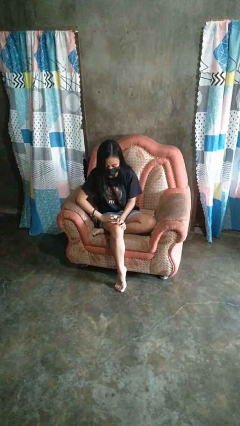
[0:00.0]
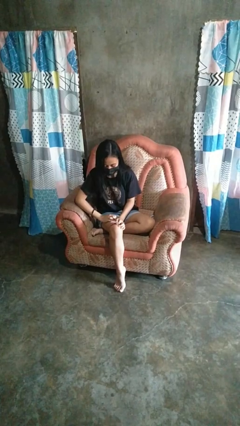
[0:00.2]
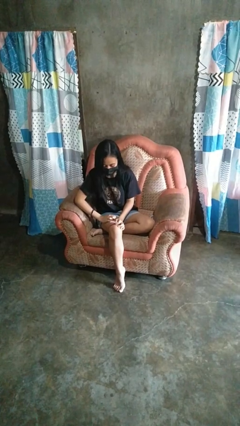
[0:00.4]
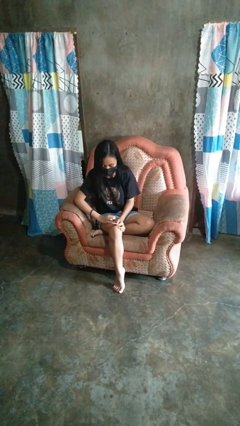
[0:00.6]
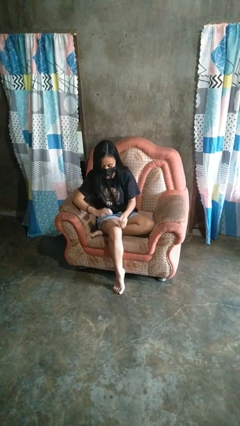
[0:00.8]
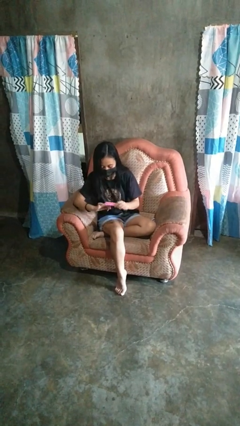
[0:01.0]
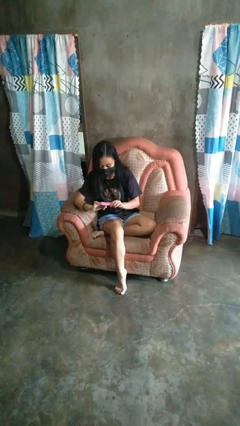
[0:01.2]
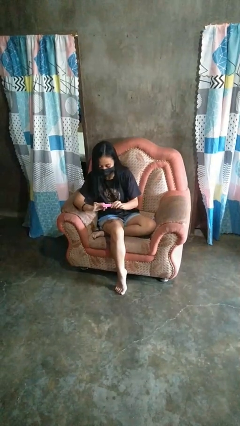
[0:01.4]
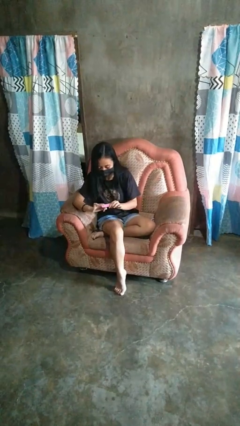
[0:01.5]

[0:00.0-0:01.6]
person files fingernails

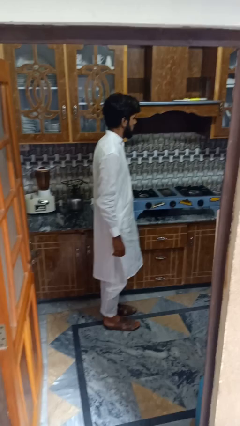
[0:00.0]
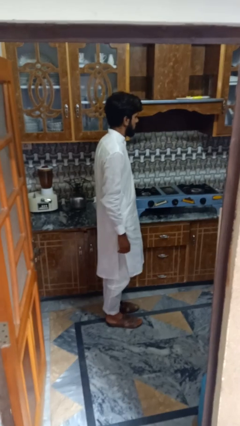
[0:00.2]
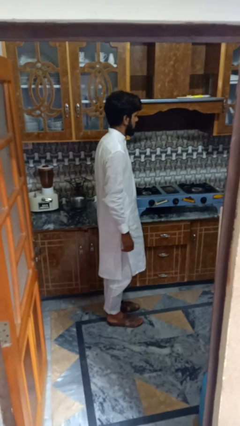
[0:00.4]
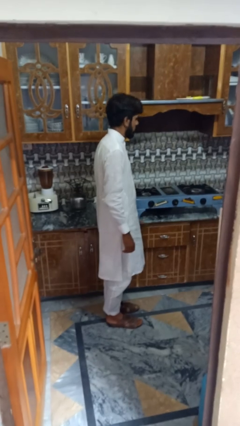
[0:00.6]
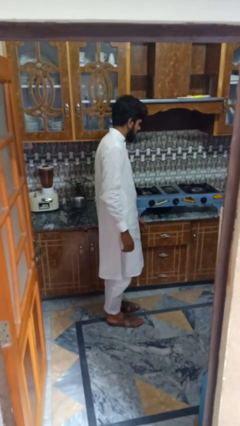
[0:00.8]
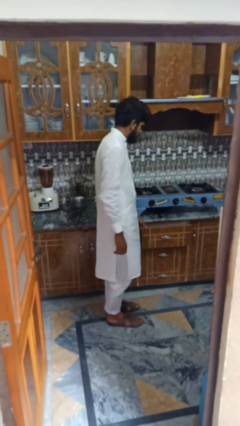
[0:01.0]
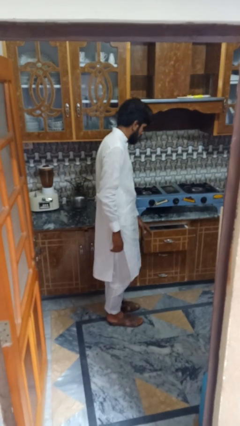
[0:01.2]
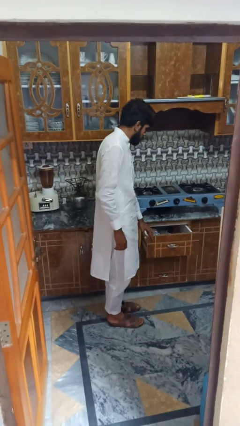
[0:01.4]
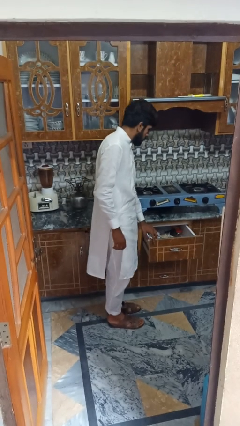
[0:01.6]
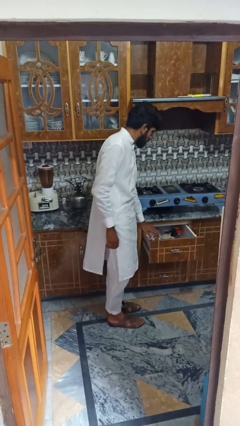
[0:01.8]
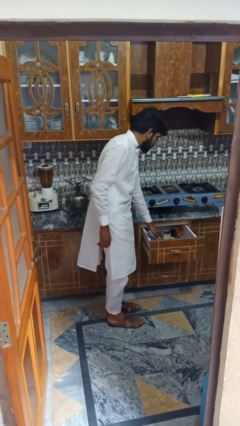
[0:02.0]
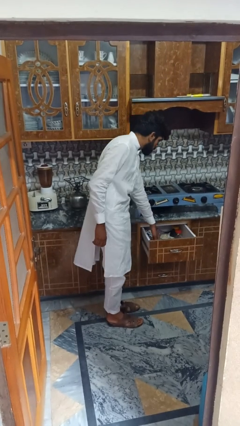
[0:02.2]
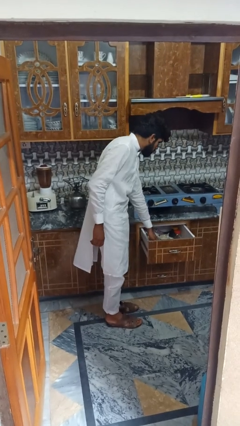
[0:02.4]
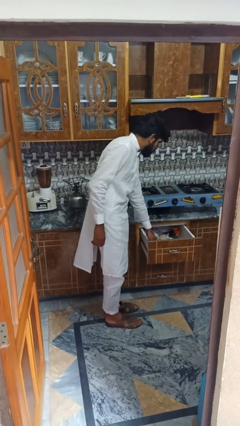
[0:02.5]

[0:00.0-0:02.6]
person searches in kitchen drawer

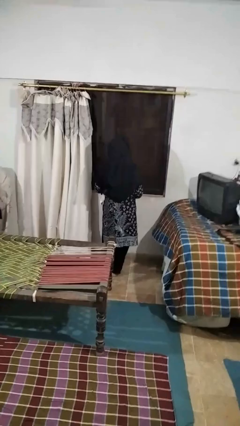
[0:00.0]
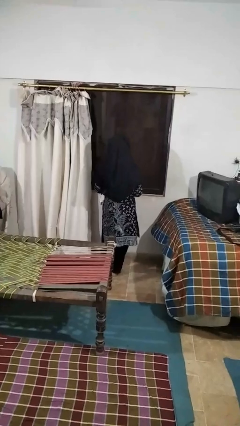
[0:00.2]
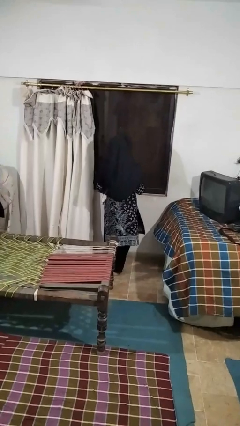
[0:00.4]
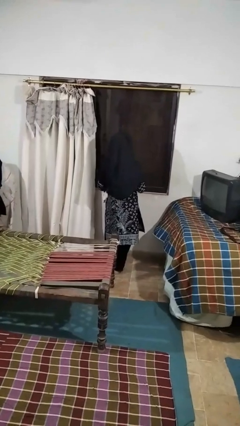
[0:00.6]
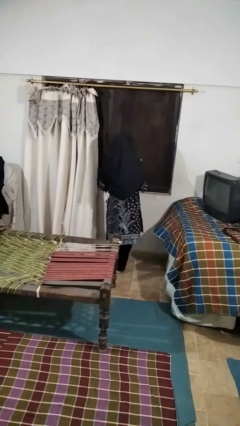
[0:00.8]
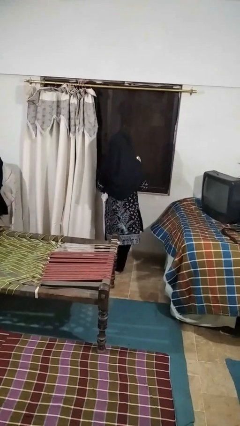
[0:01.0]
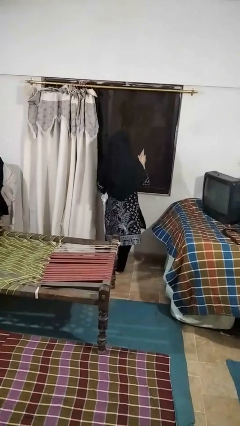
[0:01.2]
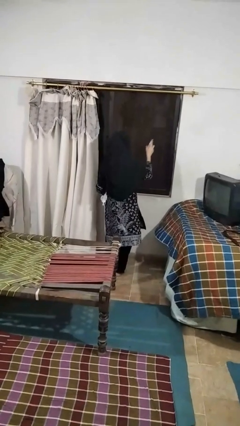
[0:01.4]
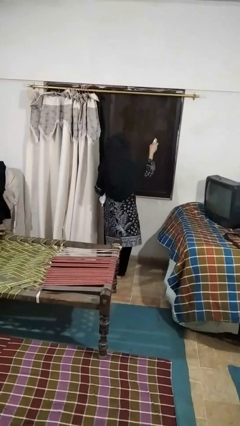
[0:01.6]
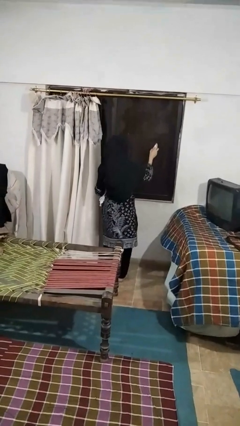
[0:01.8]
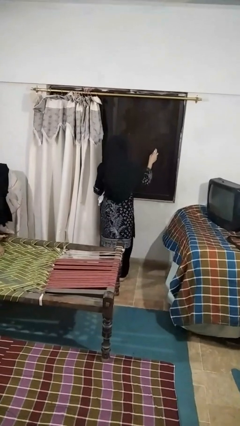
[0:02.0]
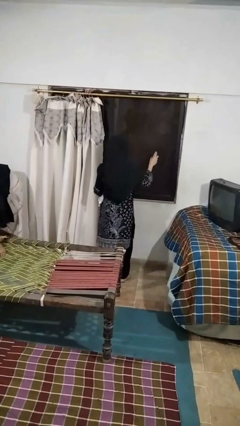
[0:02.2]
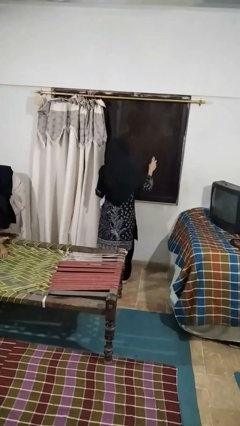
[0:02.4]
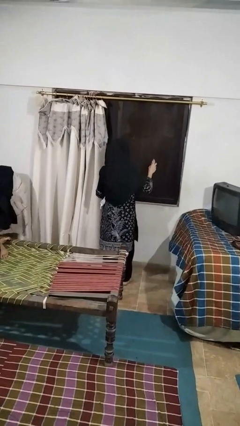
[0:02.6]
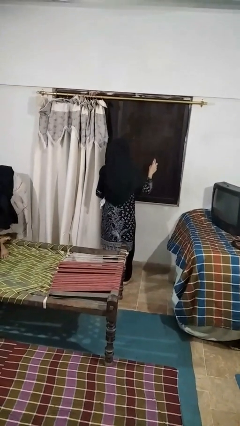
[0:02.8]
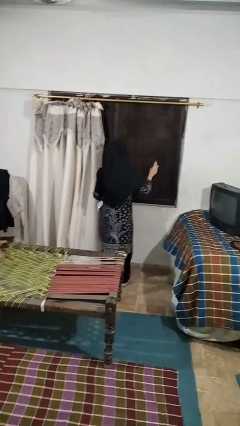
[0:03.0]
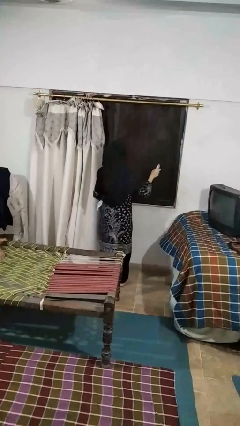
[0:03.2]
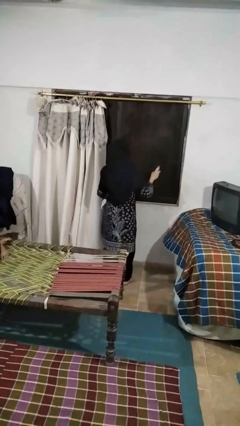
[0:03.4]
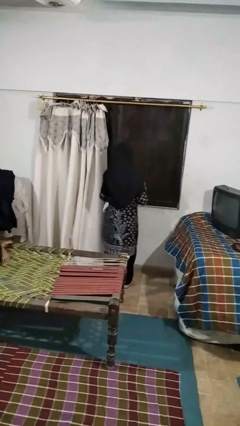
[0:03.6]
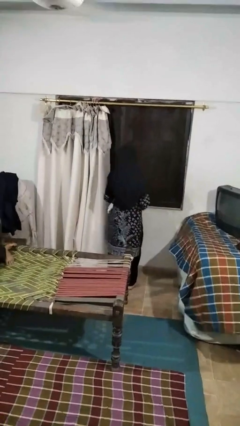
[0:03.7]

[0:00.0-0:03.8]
person sprays from bottle

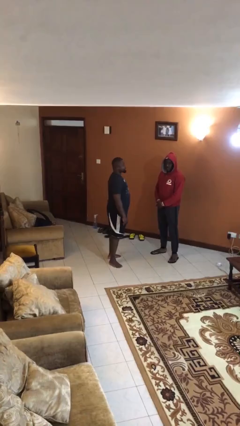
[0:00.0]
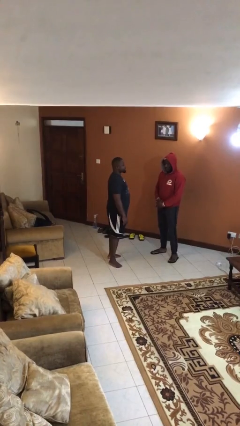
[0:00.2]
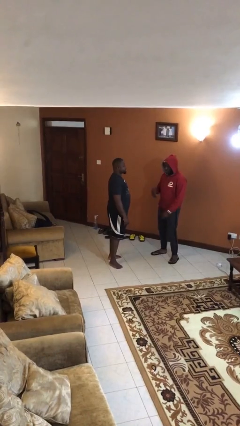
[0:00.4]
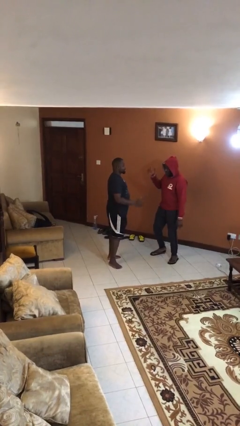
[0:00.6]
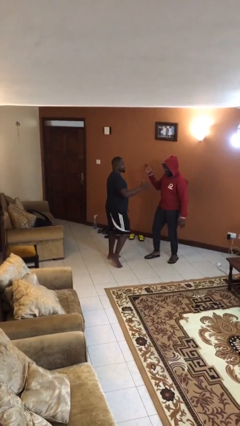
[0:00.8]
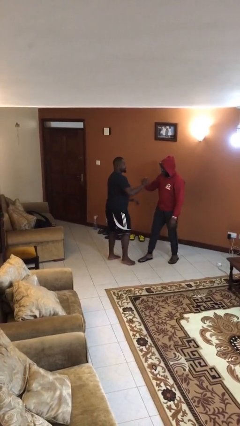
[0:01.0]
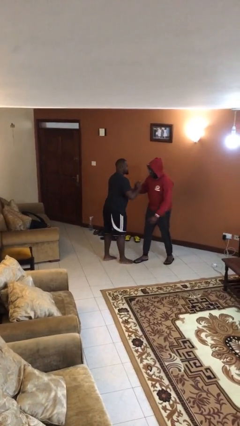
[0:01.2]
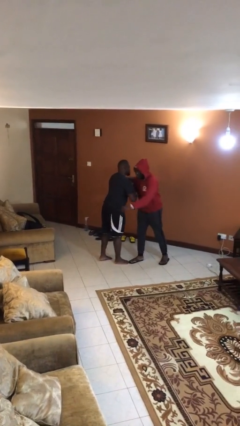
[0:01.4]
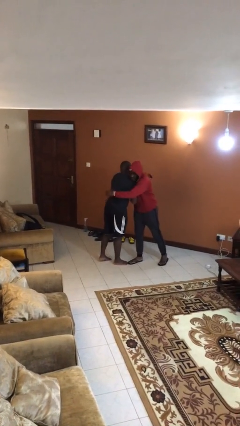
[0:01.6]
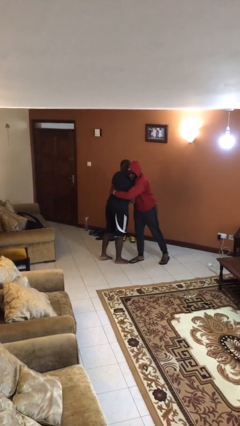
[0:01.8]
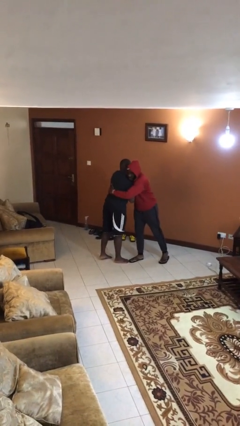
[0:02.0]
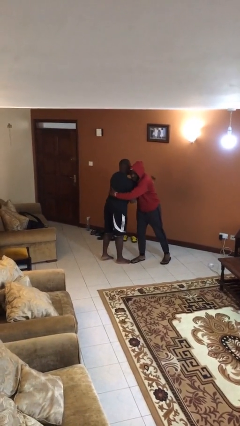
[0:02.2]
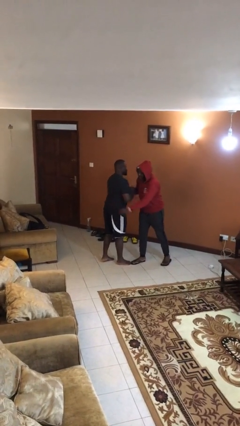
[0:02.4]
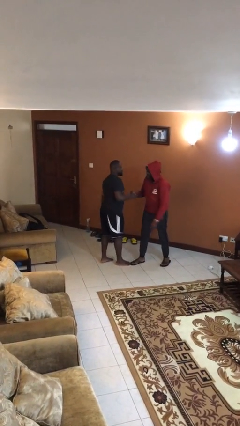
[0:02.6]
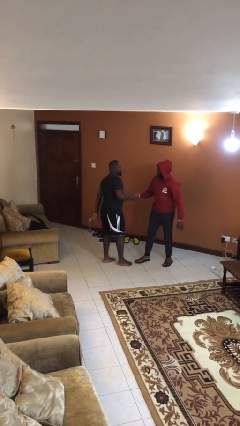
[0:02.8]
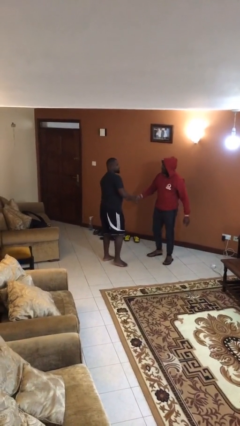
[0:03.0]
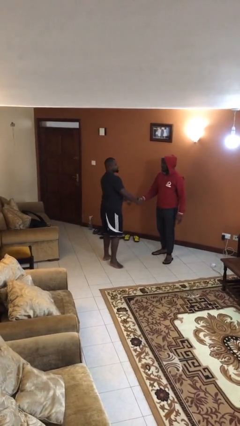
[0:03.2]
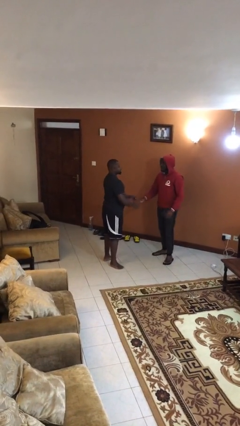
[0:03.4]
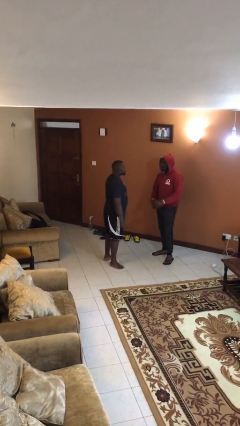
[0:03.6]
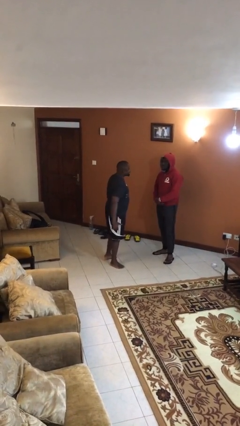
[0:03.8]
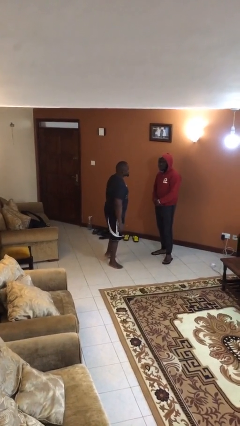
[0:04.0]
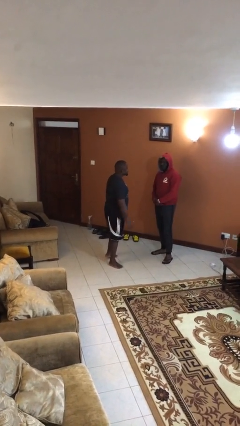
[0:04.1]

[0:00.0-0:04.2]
person embraces person

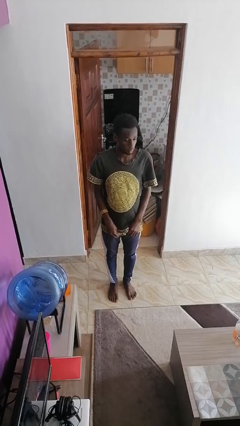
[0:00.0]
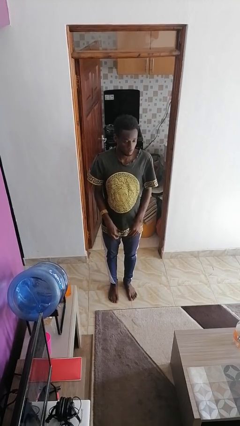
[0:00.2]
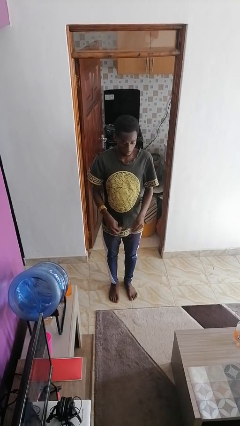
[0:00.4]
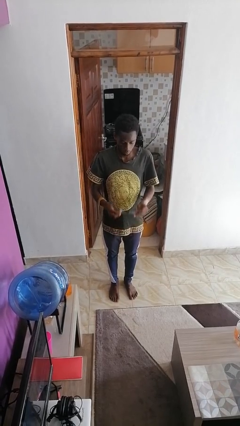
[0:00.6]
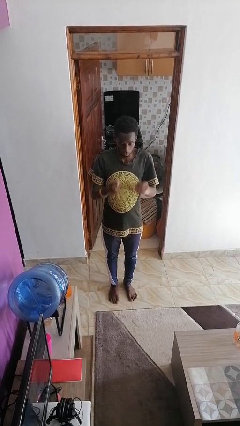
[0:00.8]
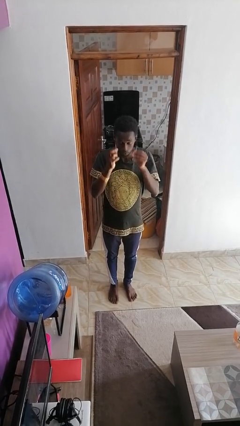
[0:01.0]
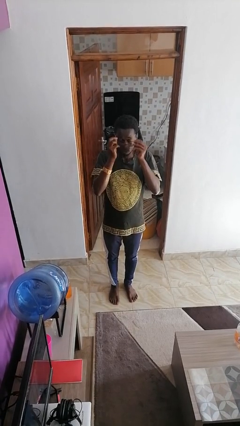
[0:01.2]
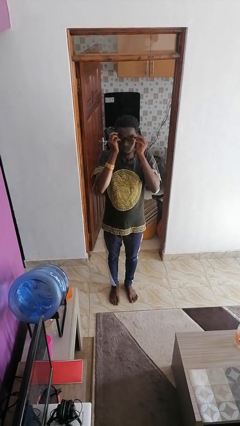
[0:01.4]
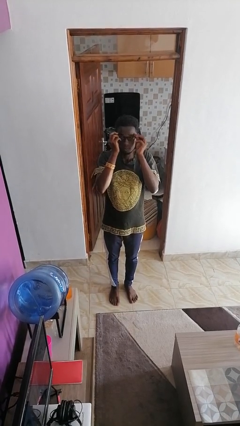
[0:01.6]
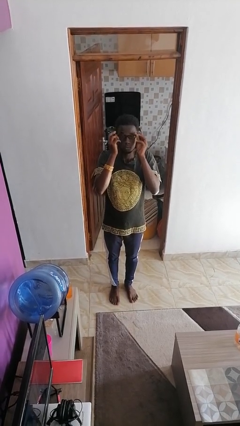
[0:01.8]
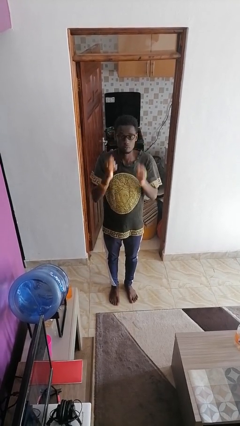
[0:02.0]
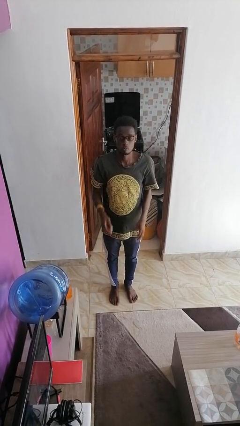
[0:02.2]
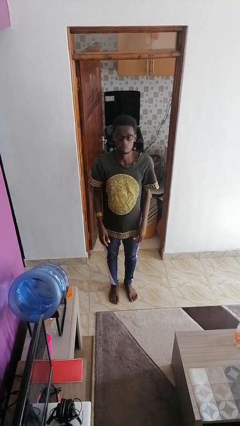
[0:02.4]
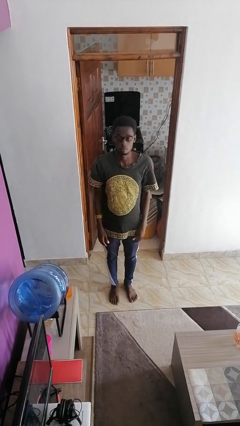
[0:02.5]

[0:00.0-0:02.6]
person puts on glasses

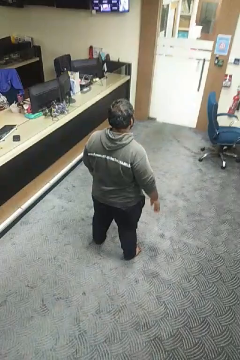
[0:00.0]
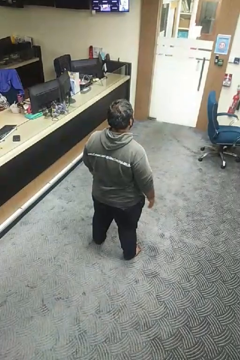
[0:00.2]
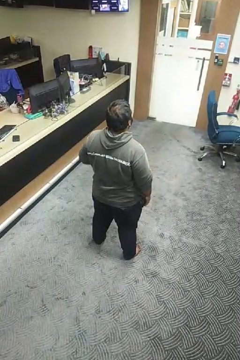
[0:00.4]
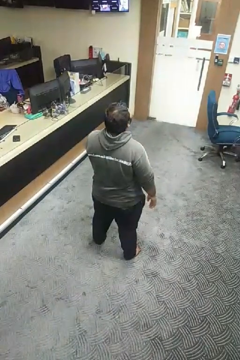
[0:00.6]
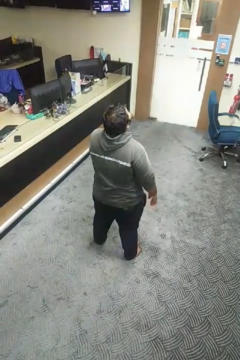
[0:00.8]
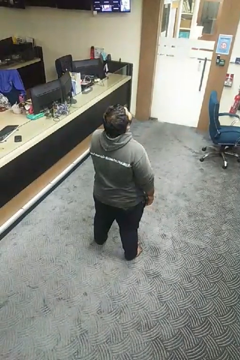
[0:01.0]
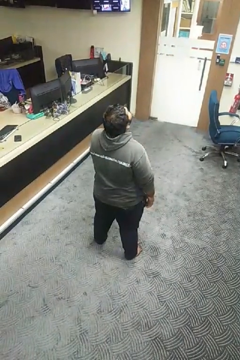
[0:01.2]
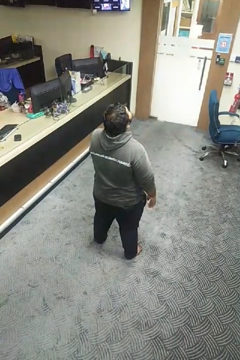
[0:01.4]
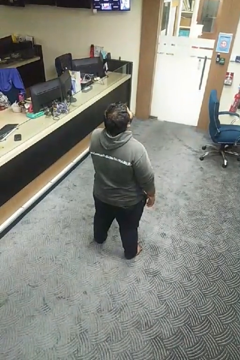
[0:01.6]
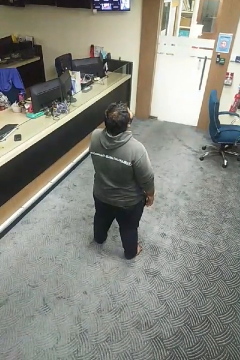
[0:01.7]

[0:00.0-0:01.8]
person rubs neck

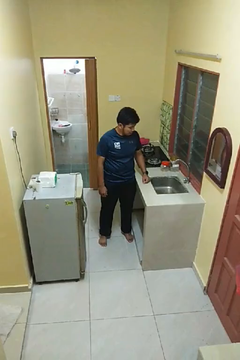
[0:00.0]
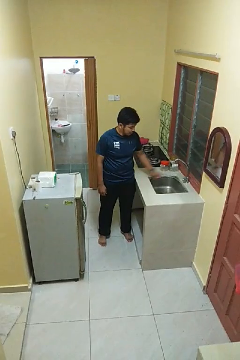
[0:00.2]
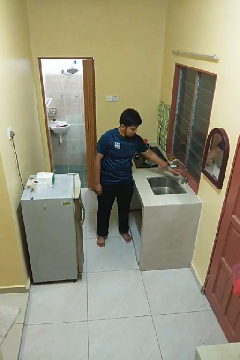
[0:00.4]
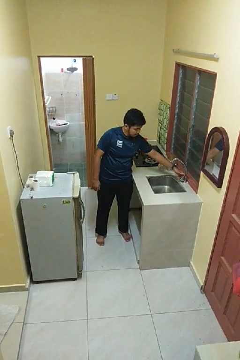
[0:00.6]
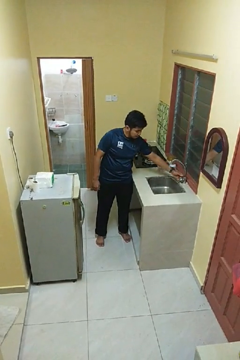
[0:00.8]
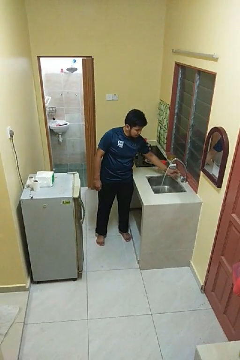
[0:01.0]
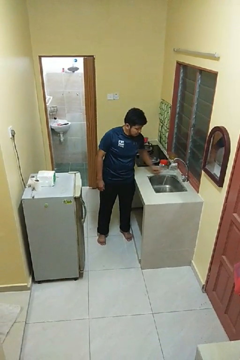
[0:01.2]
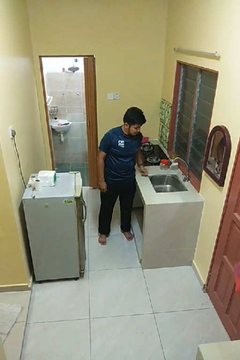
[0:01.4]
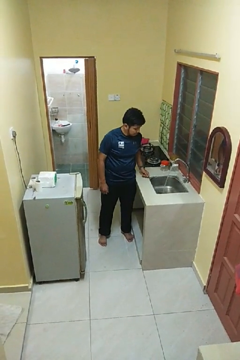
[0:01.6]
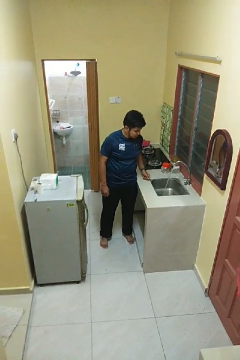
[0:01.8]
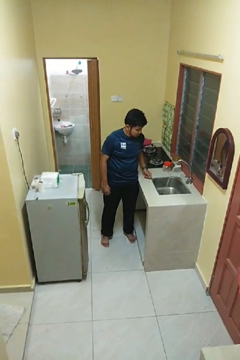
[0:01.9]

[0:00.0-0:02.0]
person turns on faucet
